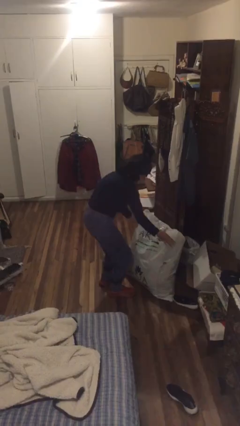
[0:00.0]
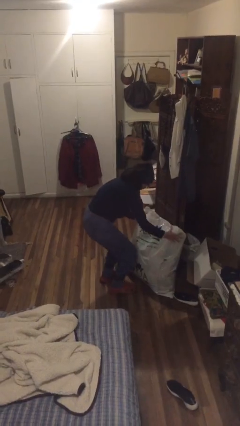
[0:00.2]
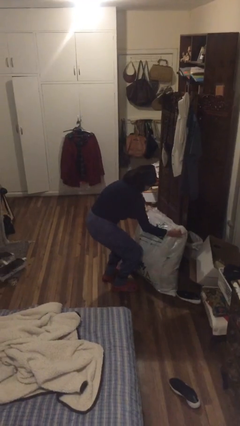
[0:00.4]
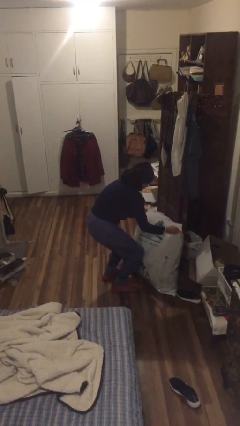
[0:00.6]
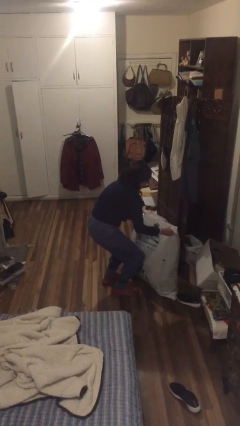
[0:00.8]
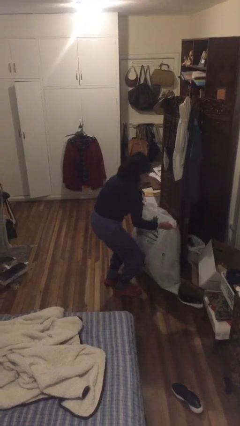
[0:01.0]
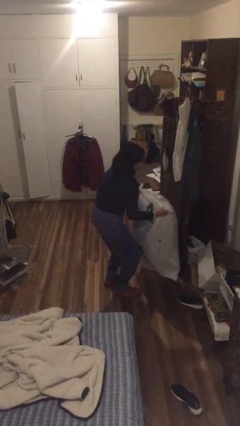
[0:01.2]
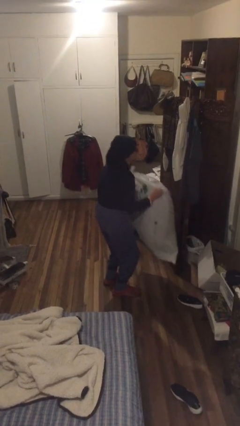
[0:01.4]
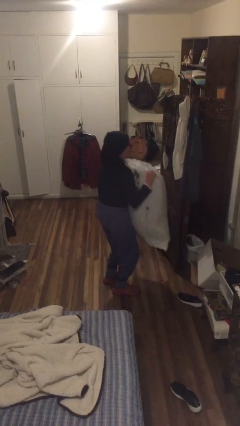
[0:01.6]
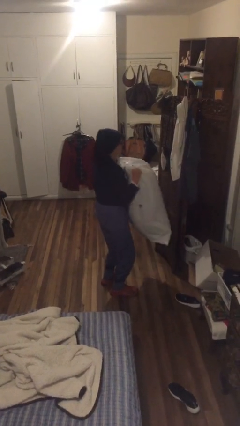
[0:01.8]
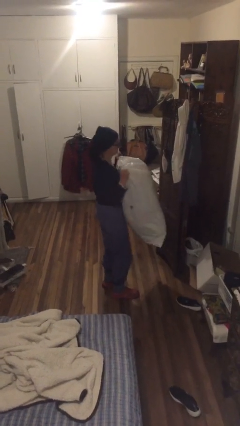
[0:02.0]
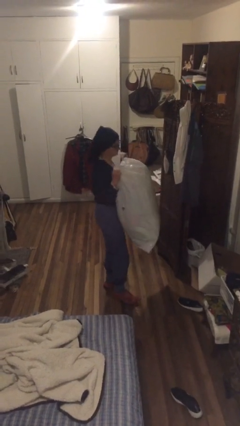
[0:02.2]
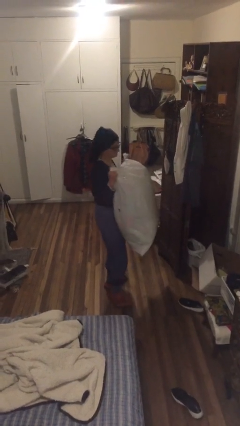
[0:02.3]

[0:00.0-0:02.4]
person picks up object from floor

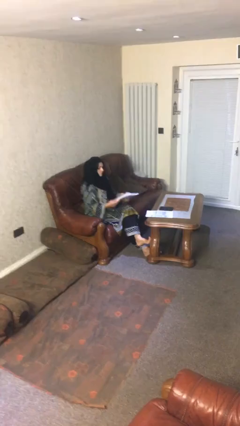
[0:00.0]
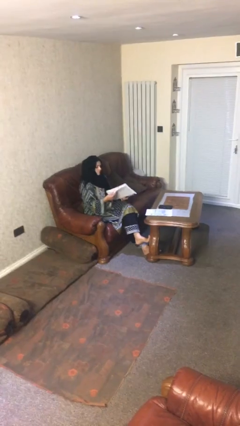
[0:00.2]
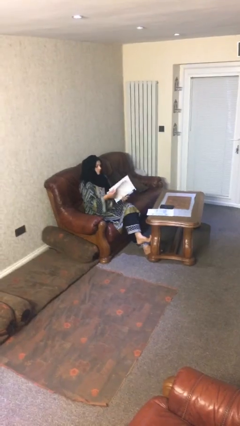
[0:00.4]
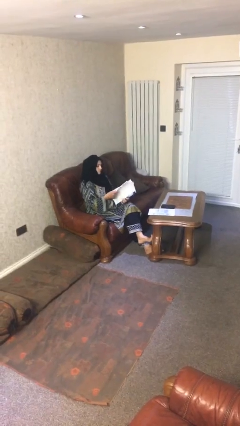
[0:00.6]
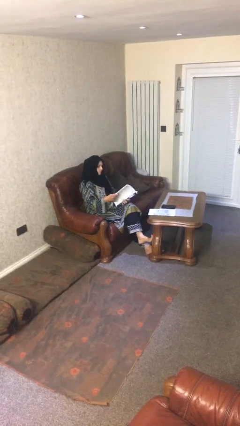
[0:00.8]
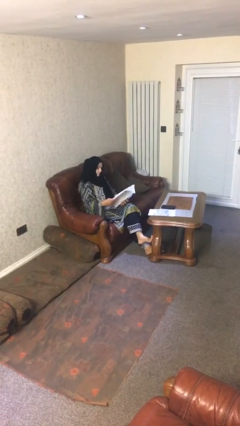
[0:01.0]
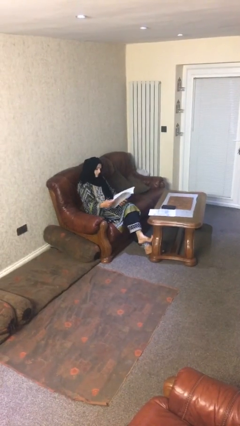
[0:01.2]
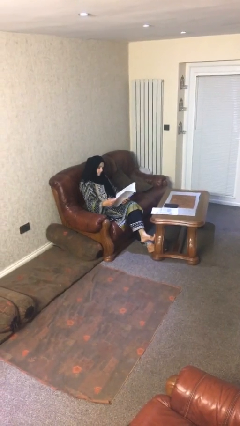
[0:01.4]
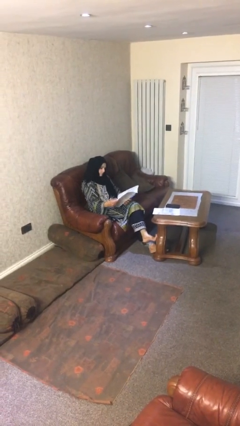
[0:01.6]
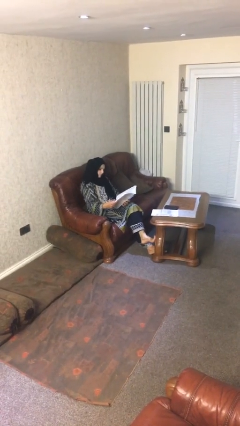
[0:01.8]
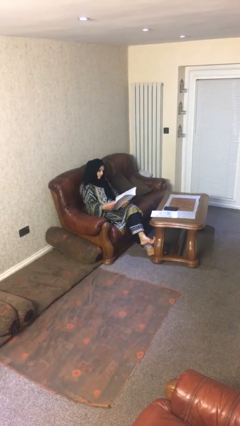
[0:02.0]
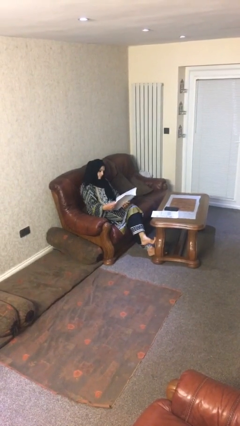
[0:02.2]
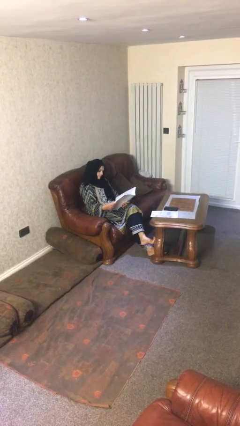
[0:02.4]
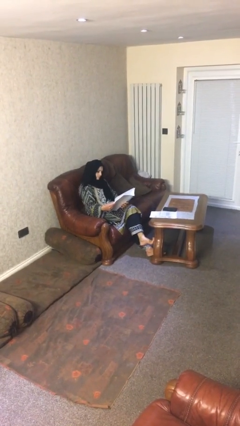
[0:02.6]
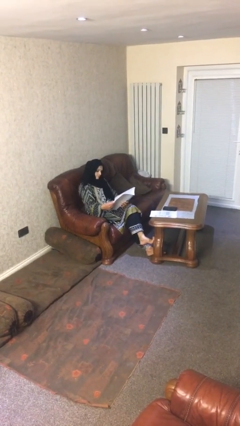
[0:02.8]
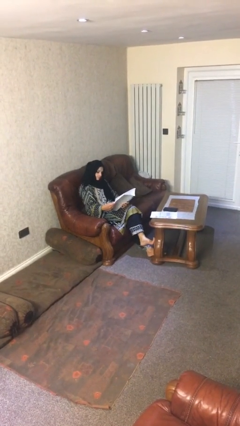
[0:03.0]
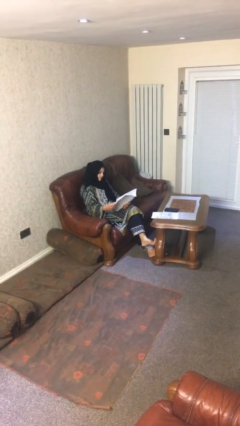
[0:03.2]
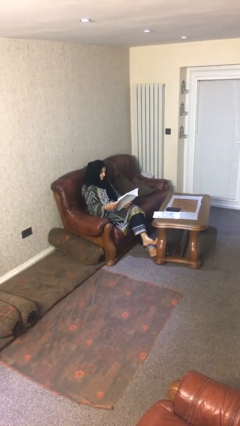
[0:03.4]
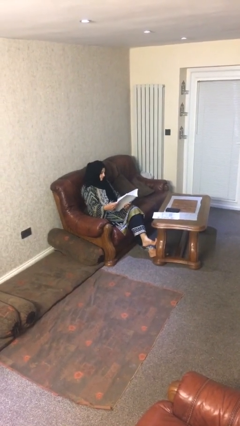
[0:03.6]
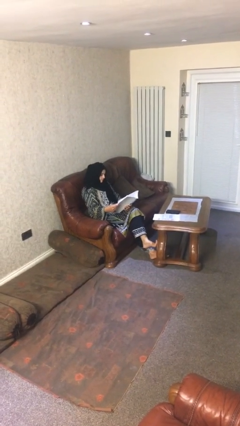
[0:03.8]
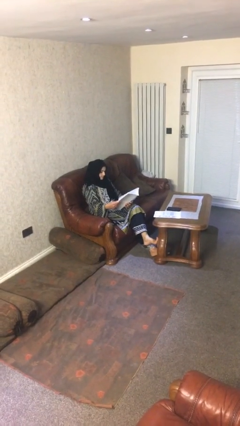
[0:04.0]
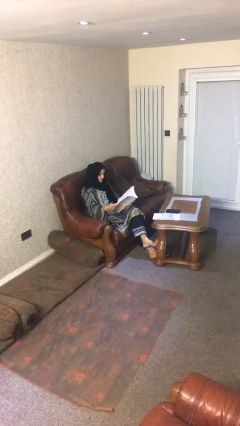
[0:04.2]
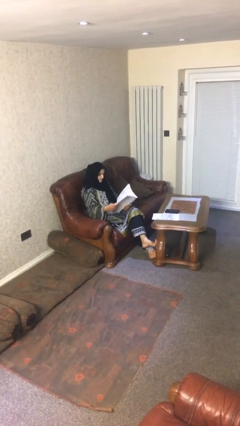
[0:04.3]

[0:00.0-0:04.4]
person reads document

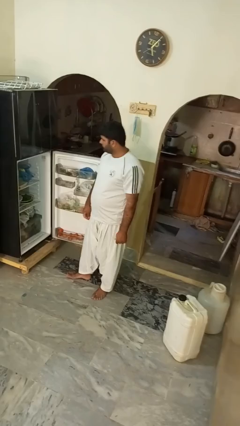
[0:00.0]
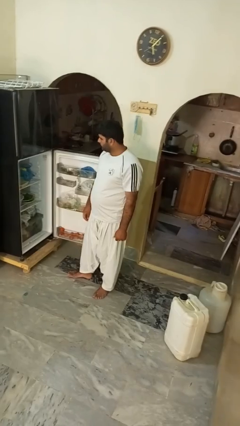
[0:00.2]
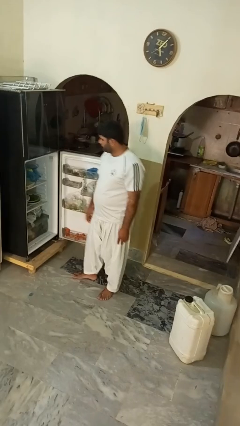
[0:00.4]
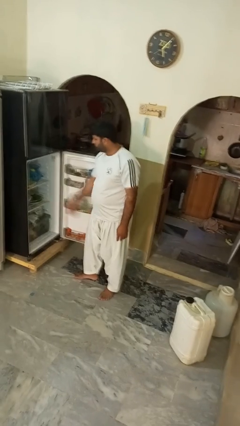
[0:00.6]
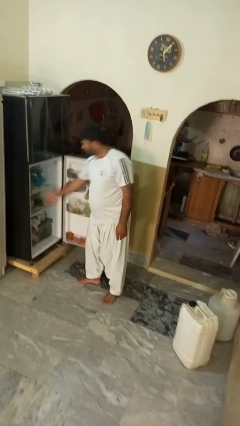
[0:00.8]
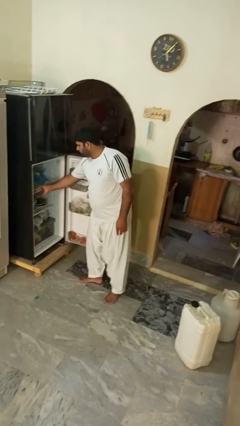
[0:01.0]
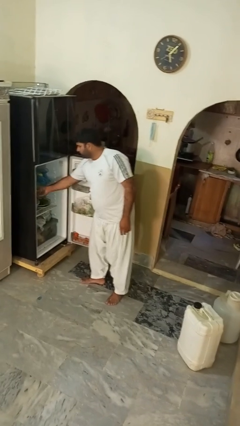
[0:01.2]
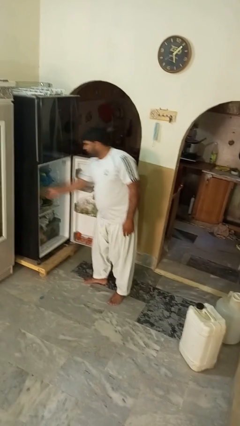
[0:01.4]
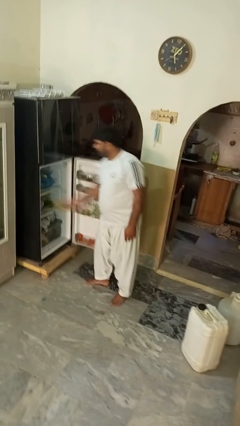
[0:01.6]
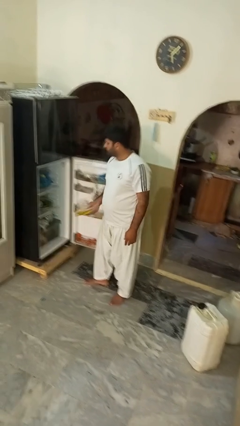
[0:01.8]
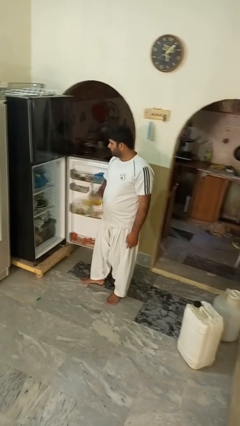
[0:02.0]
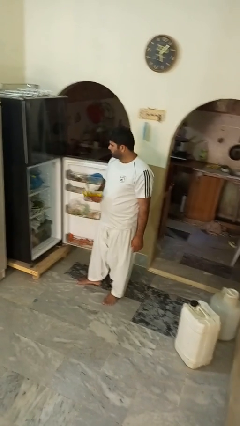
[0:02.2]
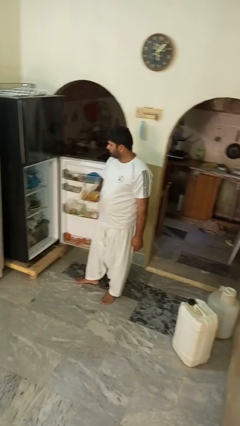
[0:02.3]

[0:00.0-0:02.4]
person takes object from refrigerator

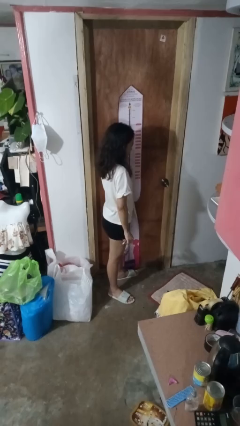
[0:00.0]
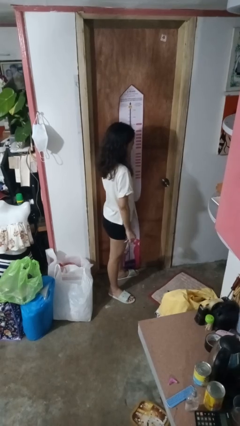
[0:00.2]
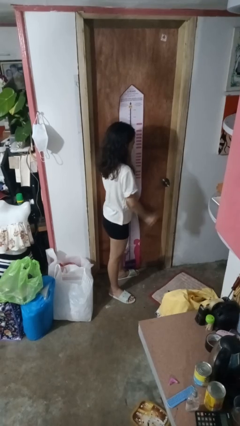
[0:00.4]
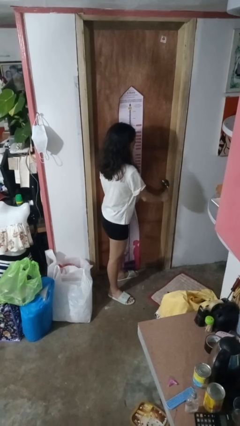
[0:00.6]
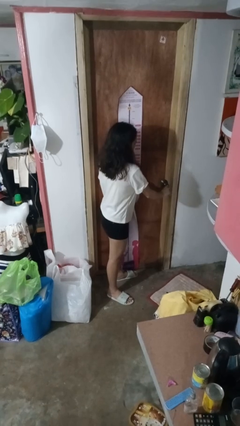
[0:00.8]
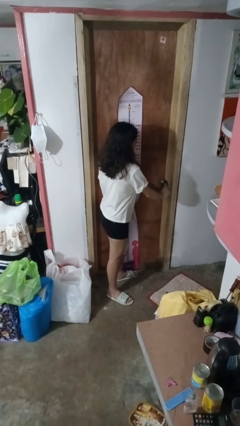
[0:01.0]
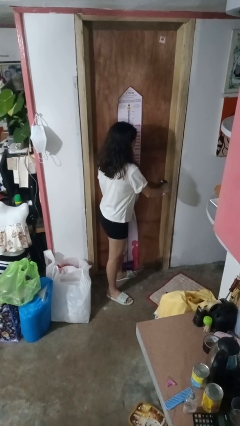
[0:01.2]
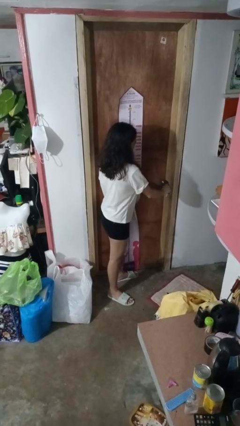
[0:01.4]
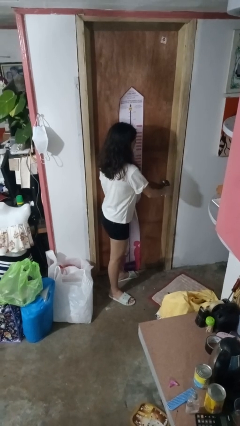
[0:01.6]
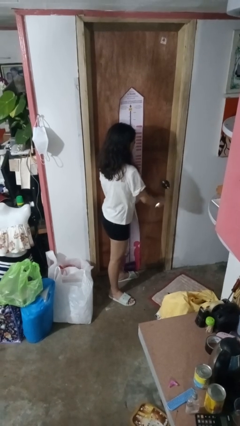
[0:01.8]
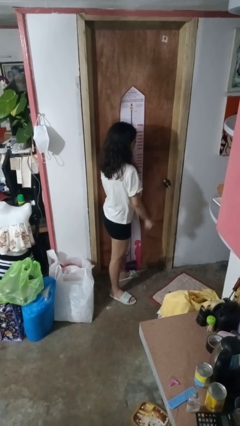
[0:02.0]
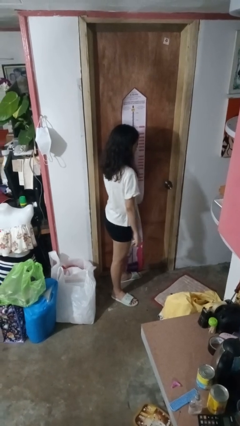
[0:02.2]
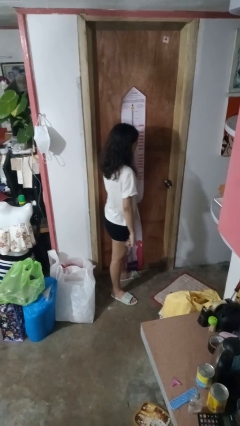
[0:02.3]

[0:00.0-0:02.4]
person unlocks door with keys

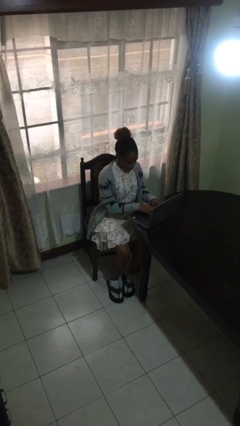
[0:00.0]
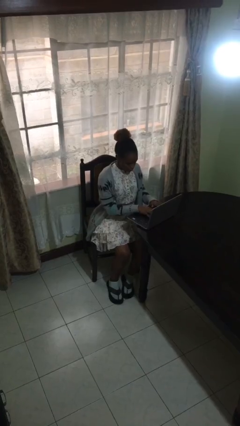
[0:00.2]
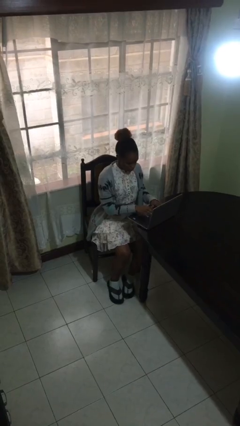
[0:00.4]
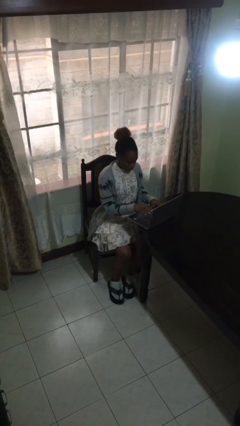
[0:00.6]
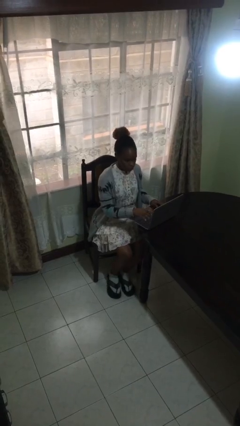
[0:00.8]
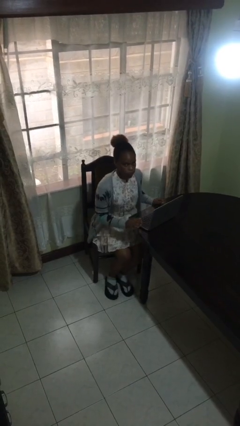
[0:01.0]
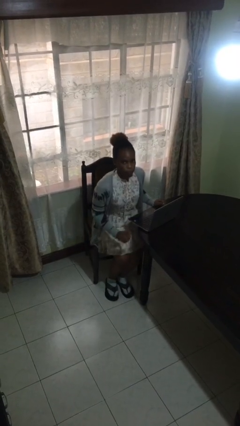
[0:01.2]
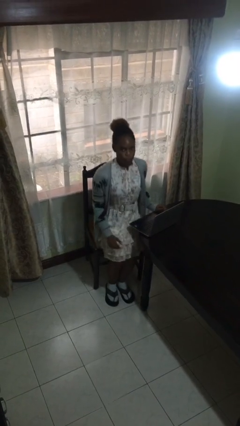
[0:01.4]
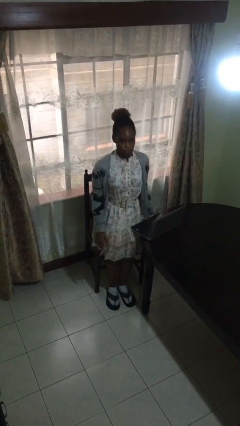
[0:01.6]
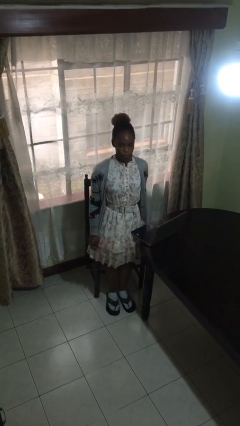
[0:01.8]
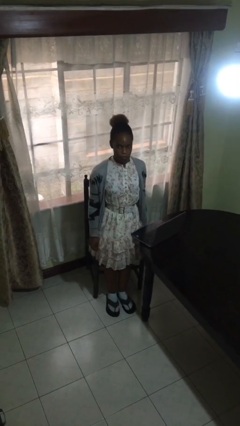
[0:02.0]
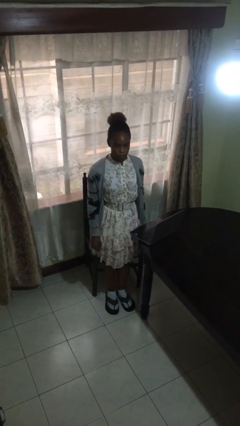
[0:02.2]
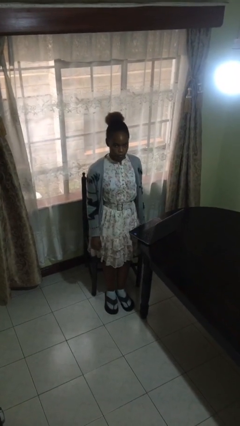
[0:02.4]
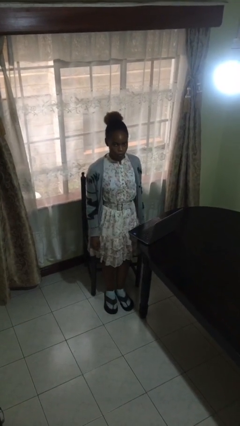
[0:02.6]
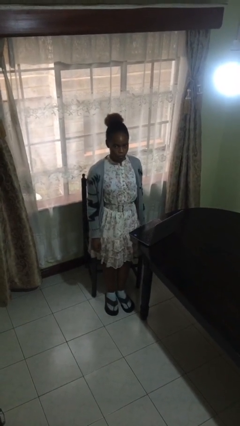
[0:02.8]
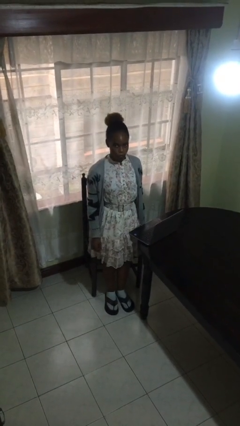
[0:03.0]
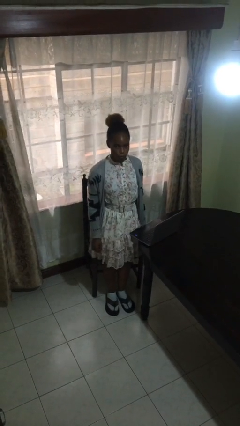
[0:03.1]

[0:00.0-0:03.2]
person stands up

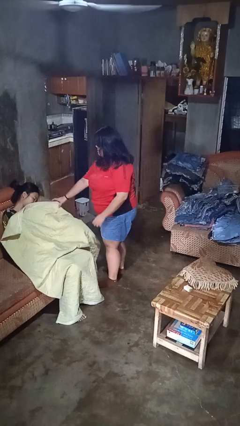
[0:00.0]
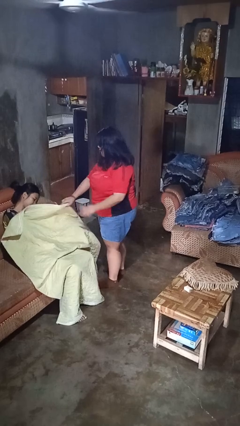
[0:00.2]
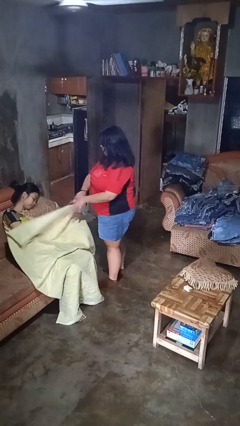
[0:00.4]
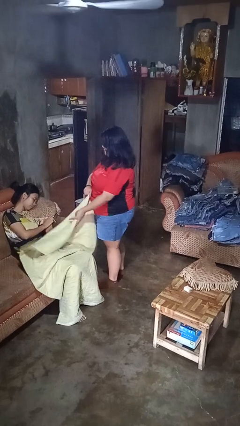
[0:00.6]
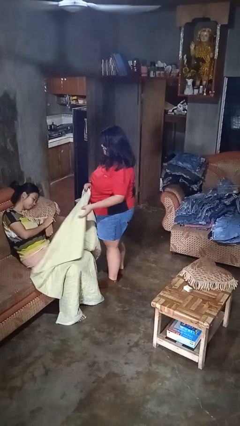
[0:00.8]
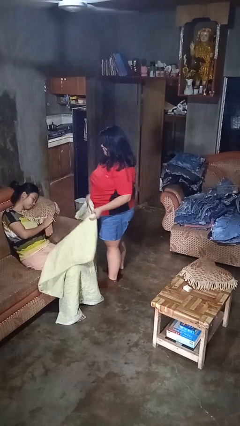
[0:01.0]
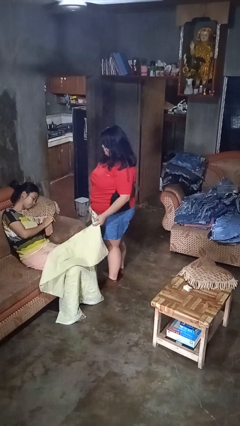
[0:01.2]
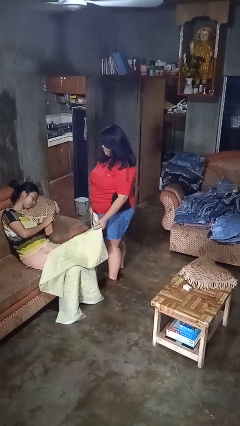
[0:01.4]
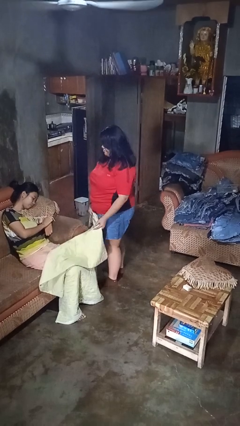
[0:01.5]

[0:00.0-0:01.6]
person uncovers friend with blanket

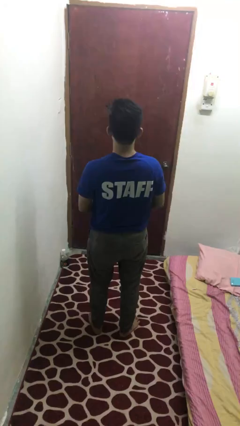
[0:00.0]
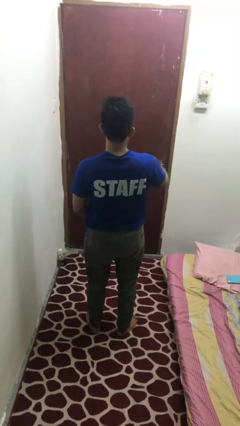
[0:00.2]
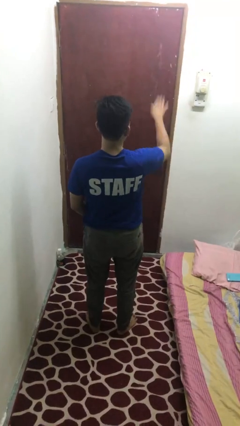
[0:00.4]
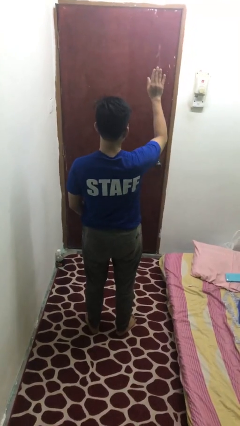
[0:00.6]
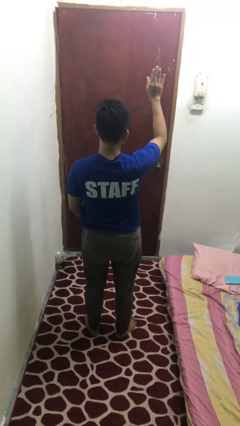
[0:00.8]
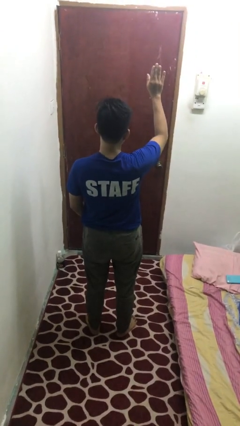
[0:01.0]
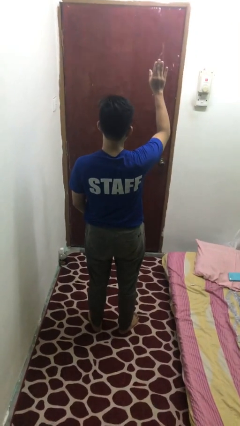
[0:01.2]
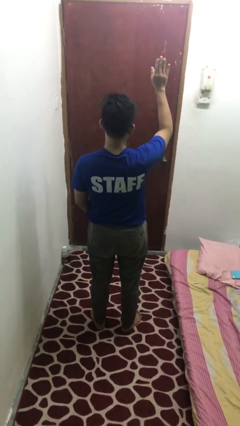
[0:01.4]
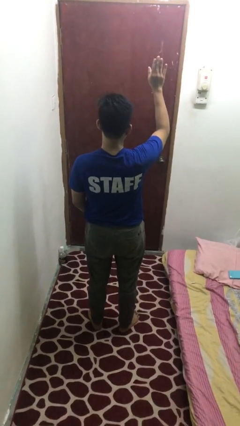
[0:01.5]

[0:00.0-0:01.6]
person gestures swipe up
